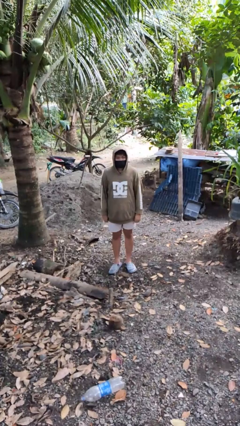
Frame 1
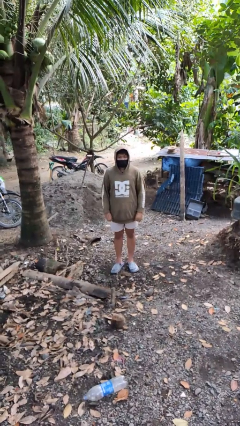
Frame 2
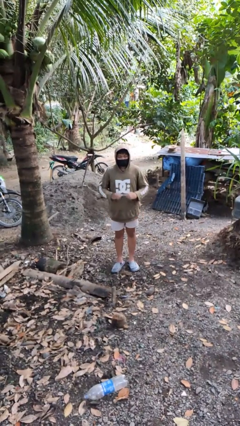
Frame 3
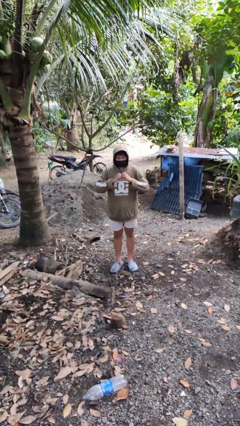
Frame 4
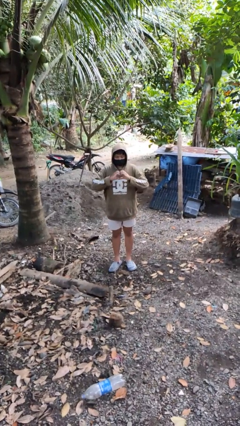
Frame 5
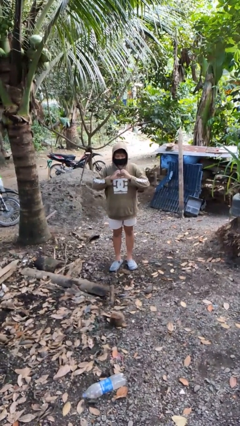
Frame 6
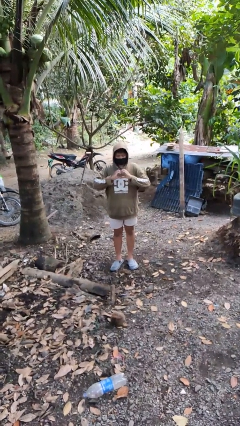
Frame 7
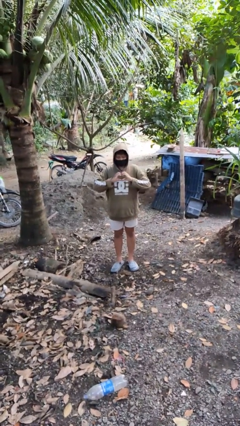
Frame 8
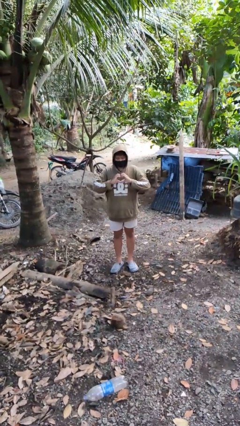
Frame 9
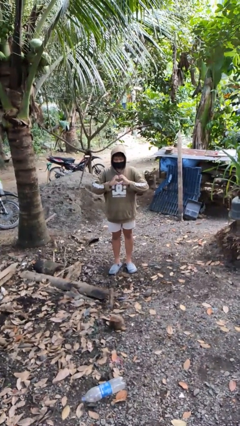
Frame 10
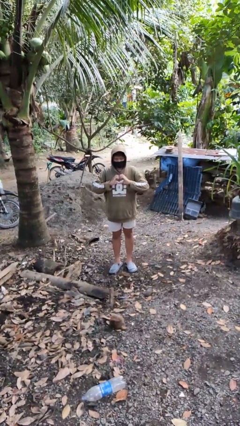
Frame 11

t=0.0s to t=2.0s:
person gestures heart

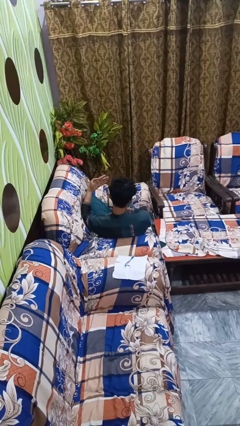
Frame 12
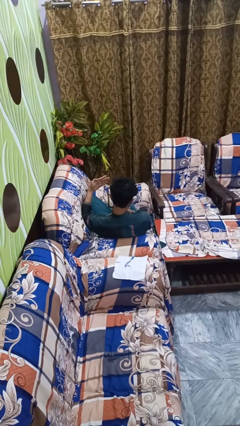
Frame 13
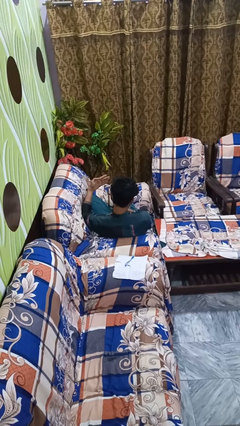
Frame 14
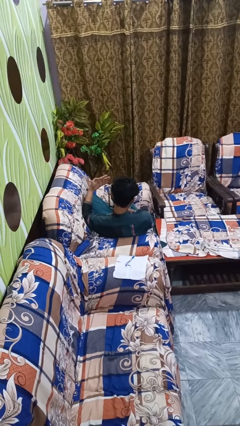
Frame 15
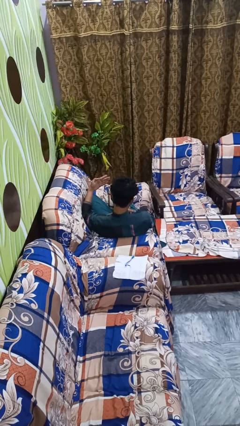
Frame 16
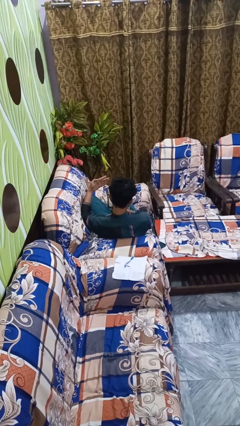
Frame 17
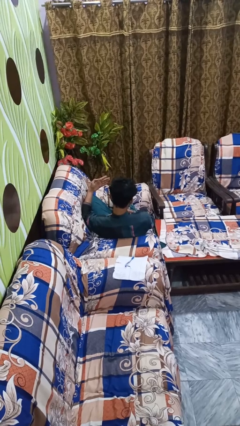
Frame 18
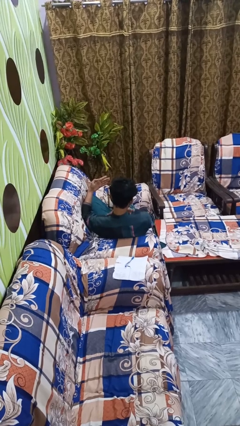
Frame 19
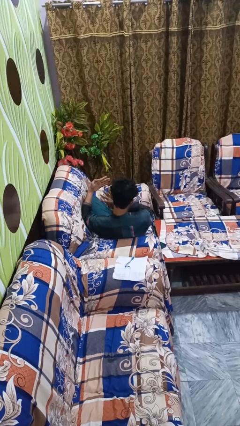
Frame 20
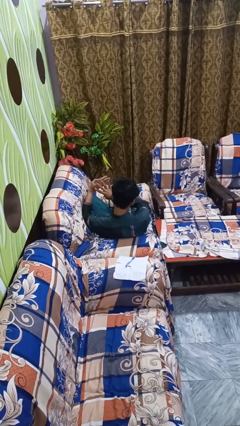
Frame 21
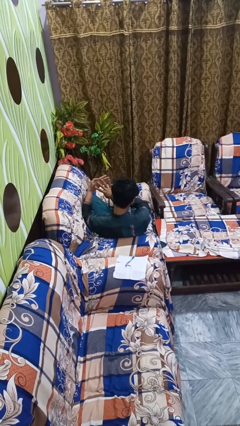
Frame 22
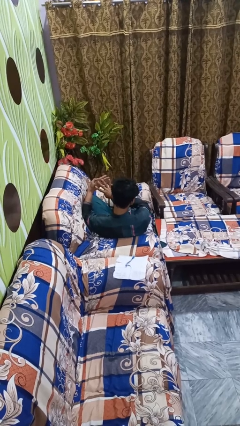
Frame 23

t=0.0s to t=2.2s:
person gestures number four

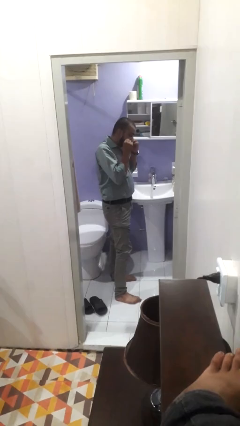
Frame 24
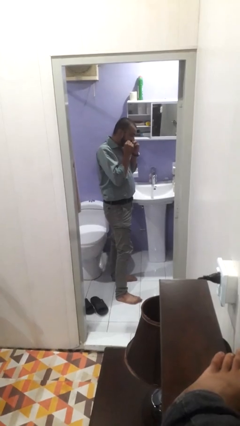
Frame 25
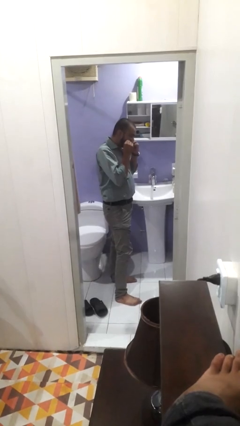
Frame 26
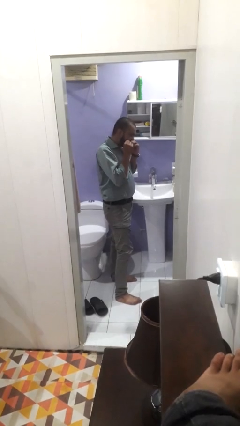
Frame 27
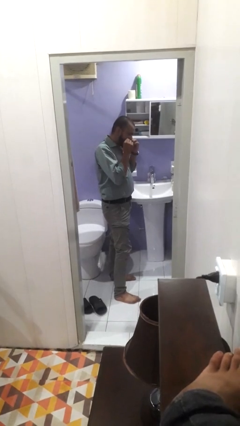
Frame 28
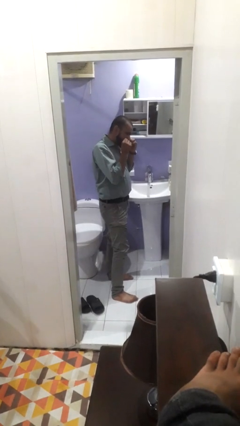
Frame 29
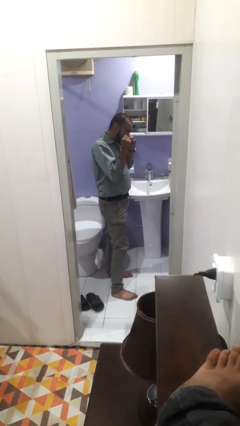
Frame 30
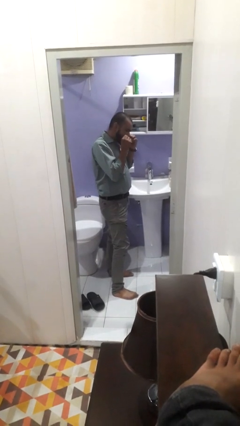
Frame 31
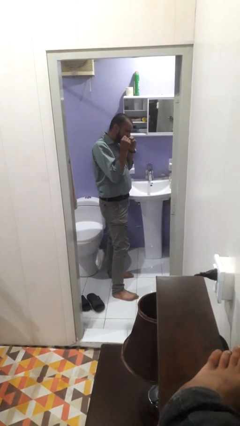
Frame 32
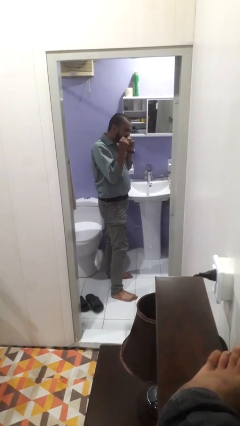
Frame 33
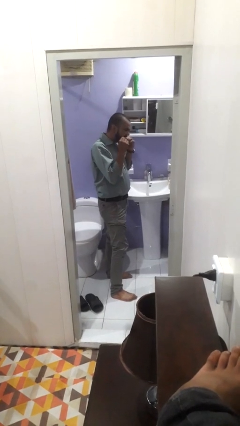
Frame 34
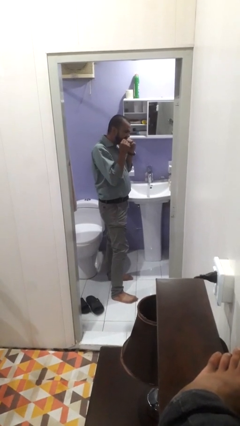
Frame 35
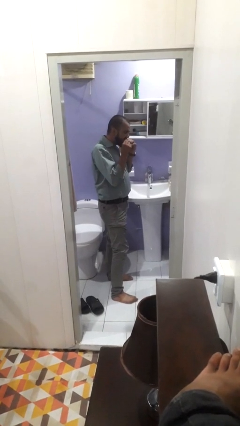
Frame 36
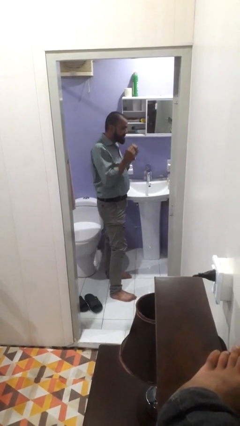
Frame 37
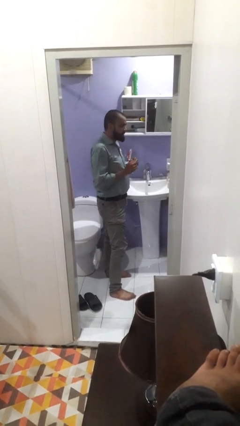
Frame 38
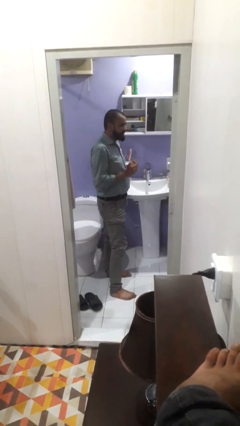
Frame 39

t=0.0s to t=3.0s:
person flosses

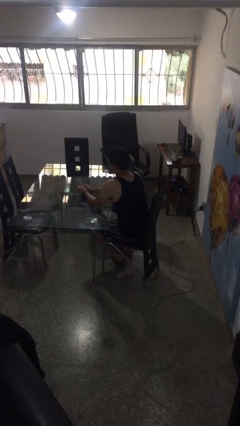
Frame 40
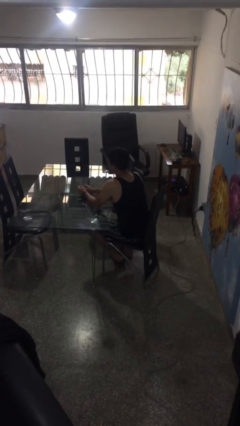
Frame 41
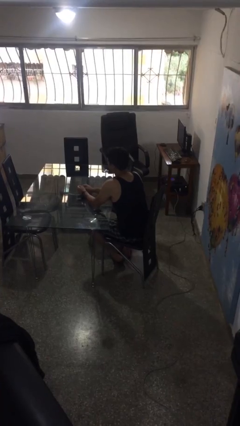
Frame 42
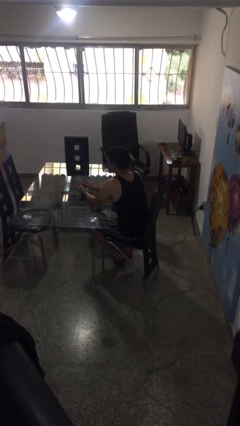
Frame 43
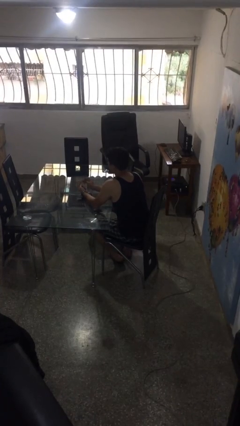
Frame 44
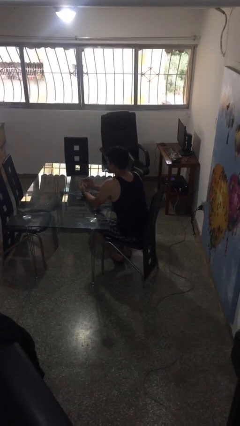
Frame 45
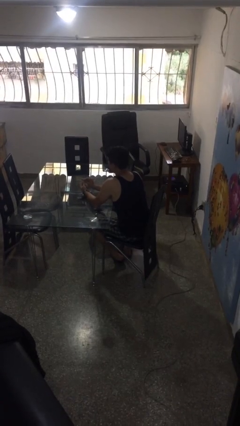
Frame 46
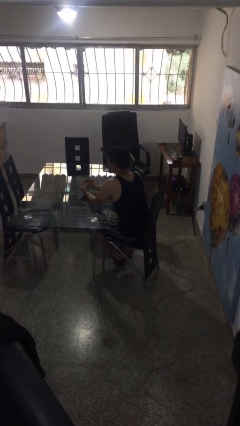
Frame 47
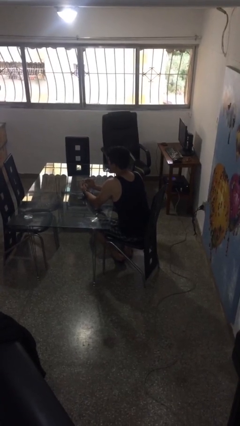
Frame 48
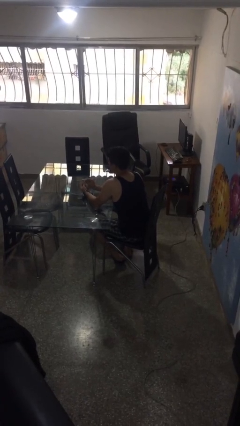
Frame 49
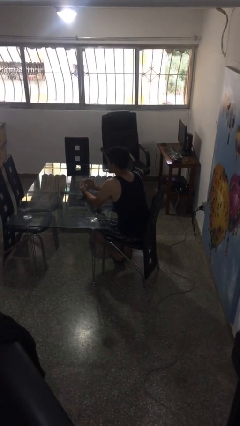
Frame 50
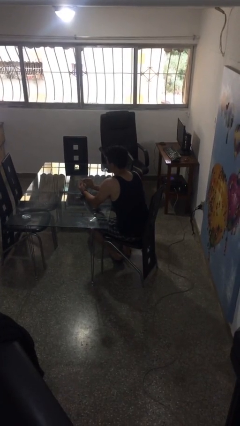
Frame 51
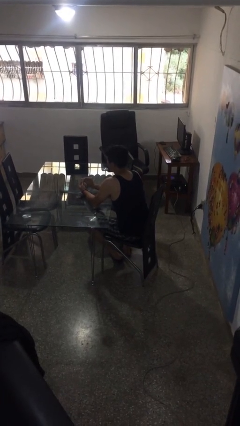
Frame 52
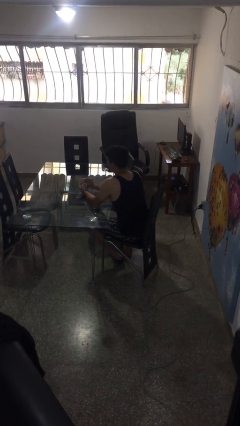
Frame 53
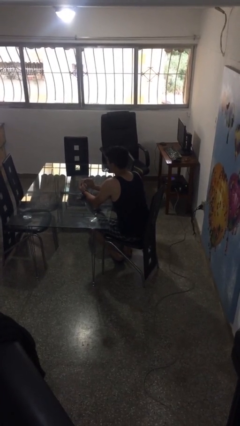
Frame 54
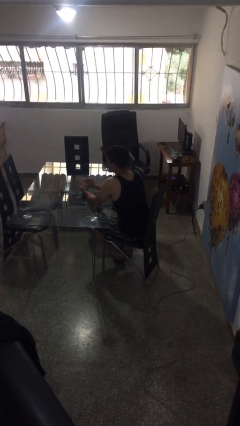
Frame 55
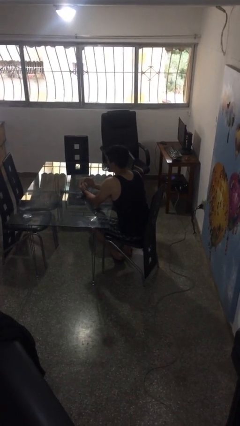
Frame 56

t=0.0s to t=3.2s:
person files fingernails

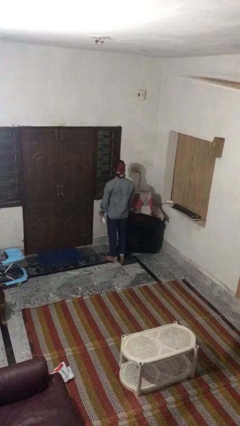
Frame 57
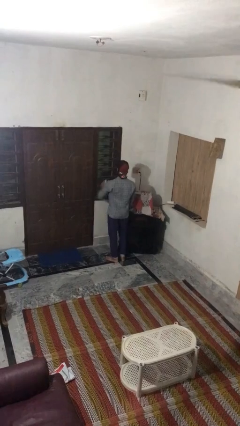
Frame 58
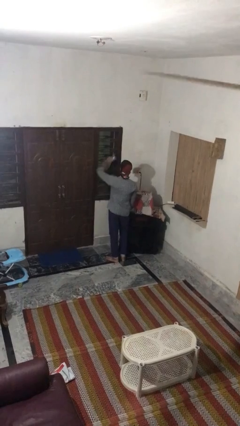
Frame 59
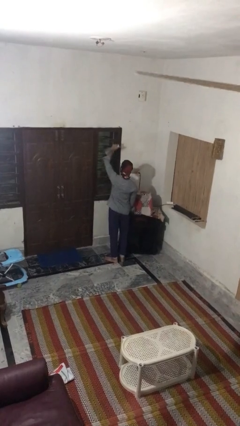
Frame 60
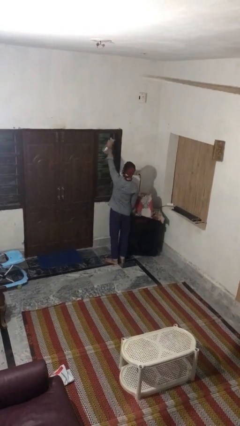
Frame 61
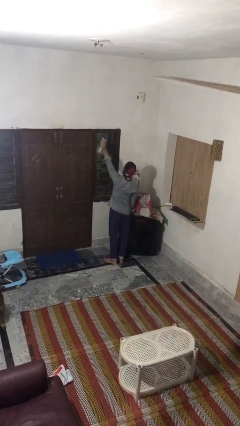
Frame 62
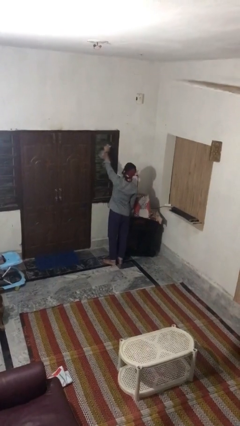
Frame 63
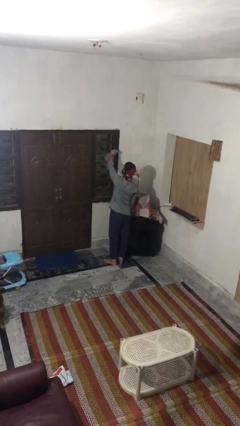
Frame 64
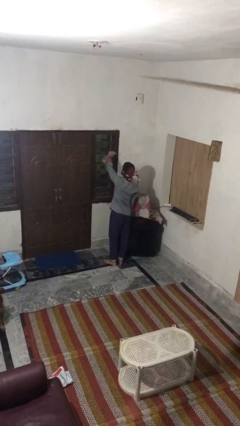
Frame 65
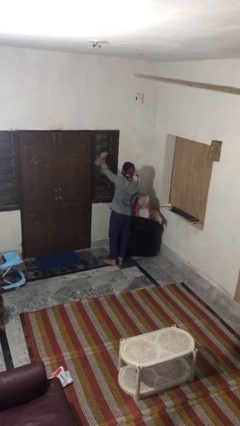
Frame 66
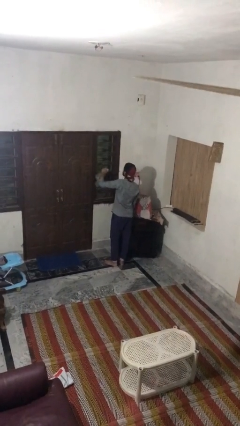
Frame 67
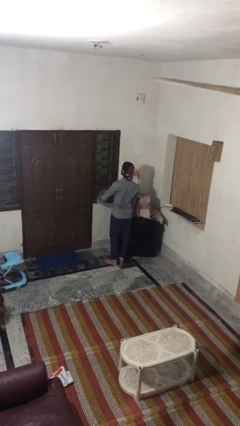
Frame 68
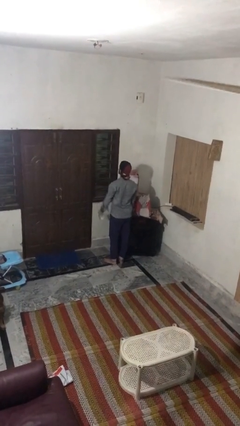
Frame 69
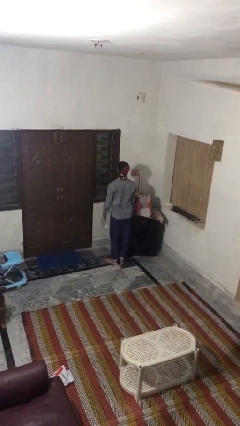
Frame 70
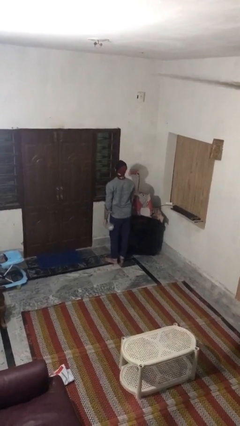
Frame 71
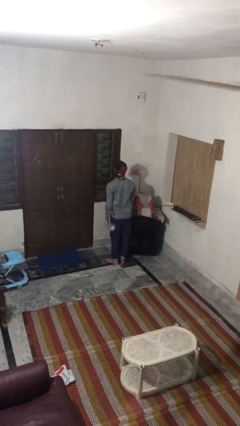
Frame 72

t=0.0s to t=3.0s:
person sprays from bottle

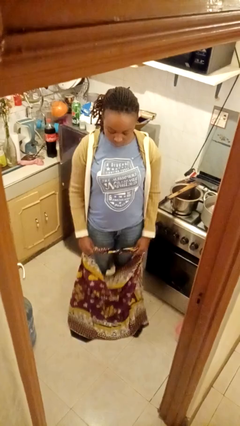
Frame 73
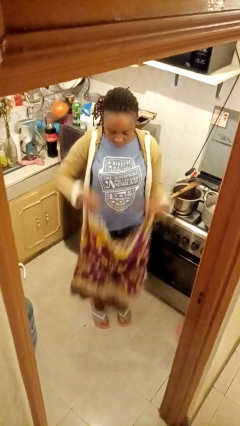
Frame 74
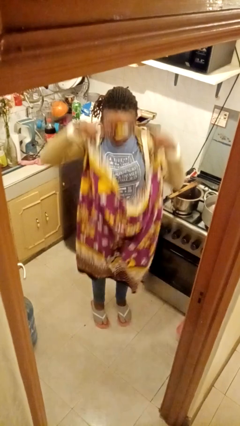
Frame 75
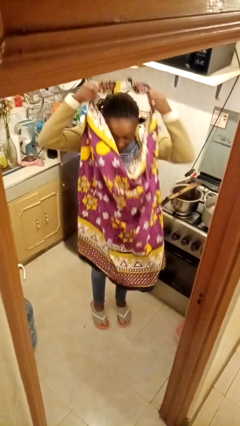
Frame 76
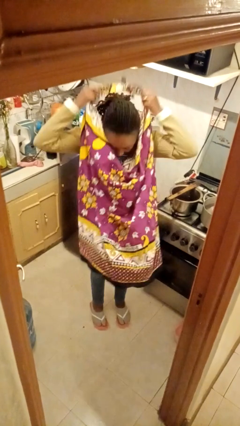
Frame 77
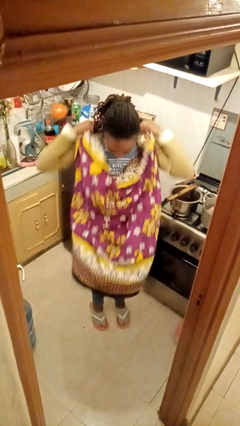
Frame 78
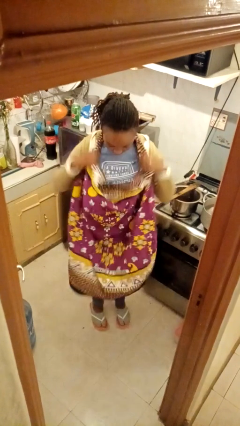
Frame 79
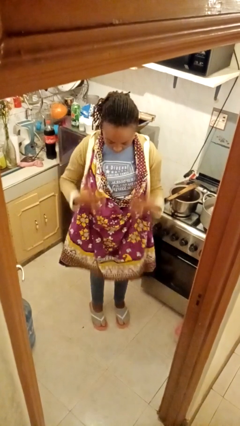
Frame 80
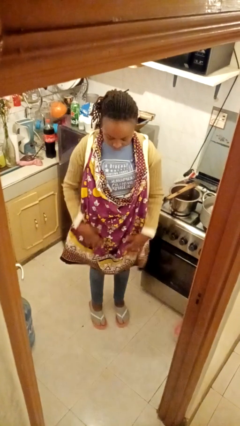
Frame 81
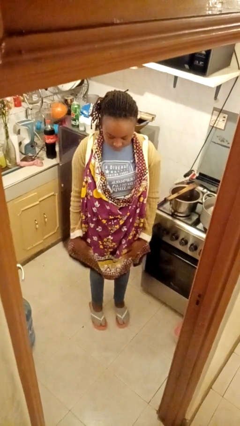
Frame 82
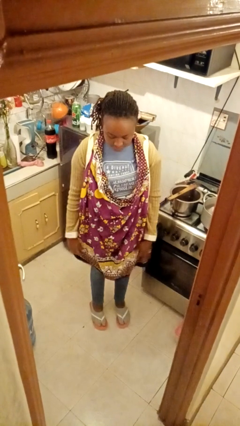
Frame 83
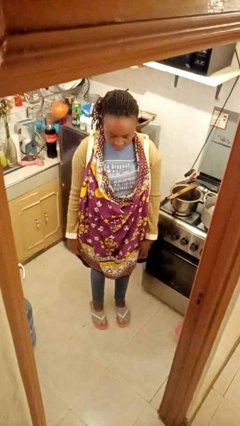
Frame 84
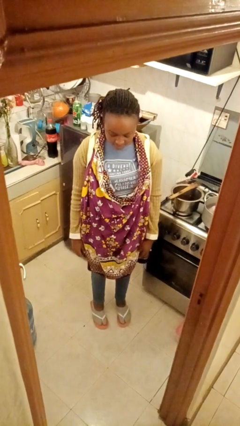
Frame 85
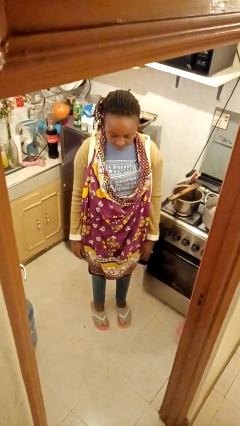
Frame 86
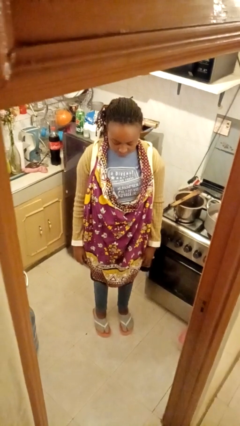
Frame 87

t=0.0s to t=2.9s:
person puts on apron

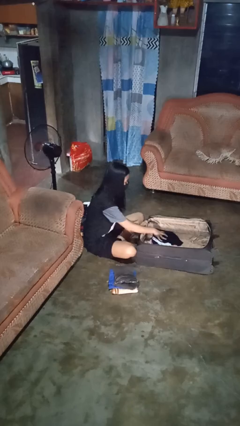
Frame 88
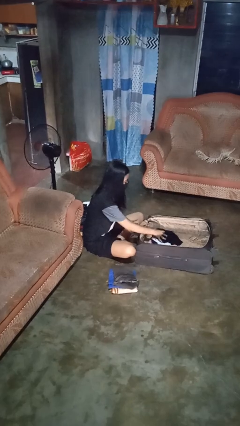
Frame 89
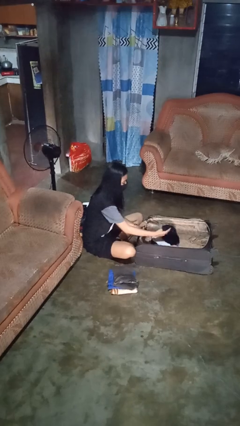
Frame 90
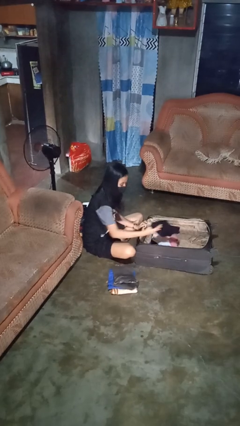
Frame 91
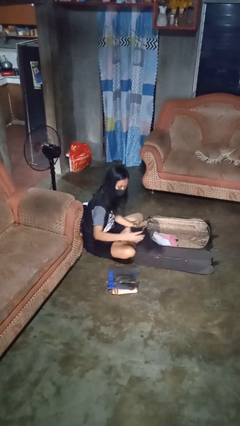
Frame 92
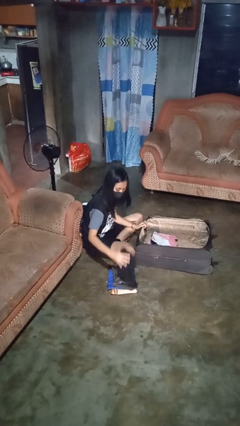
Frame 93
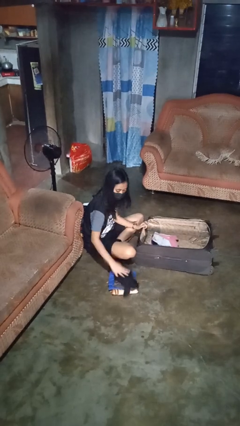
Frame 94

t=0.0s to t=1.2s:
person unloads clothes from suitcase
